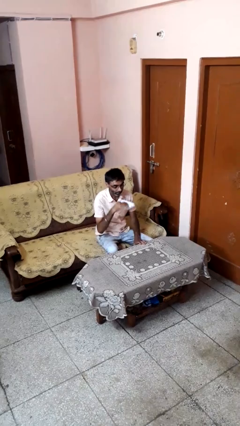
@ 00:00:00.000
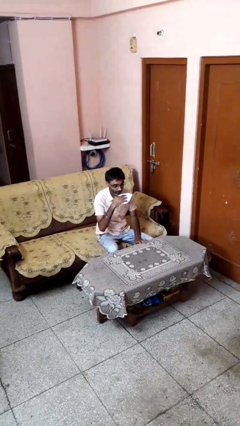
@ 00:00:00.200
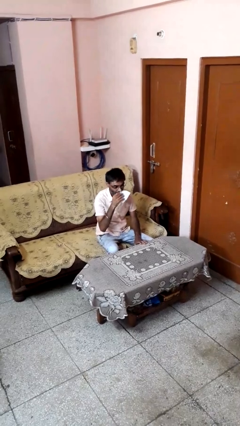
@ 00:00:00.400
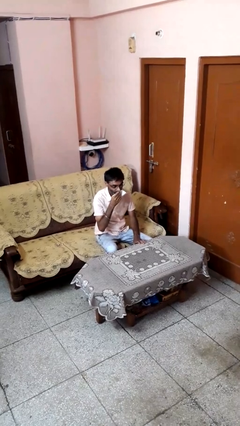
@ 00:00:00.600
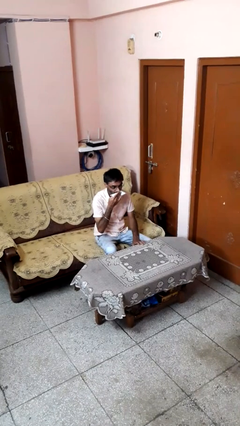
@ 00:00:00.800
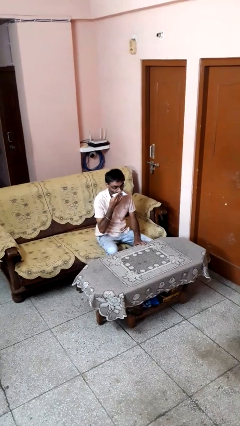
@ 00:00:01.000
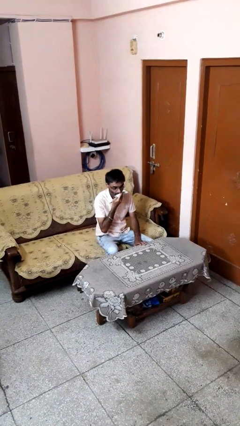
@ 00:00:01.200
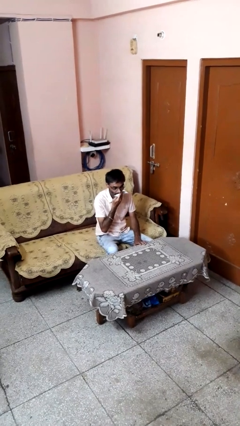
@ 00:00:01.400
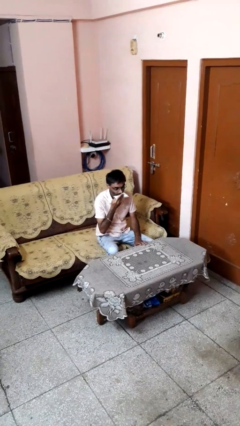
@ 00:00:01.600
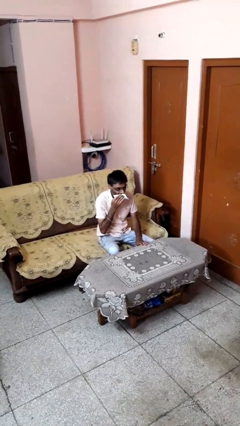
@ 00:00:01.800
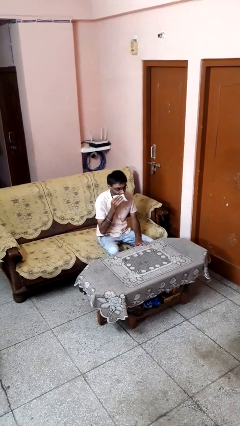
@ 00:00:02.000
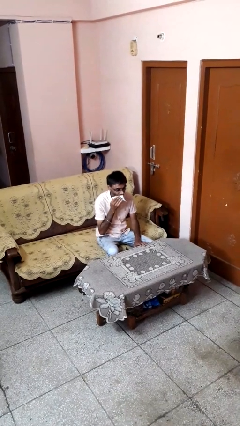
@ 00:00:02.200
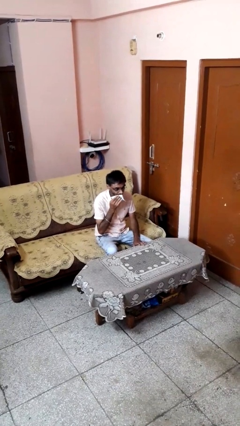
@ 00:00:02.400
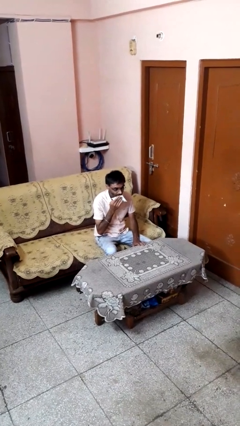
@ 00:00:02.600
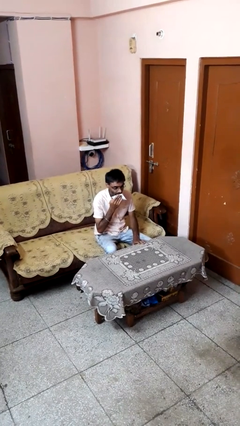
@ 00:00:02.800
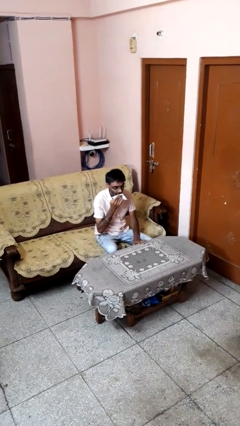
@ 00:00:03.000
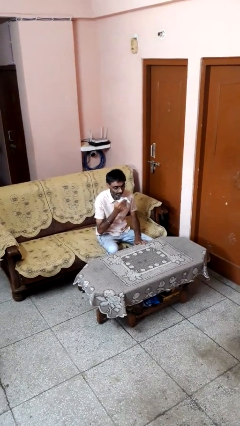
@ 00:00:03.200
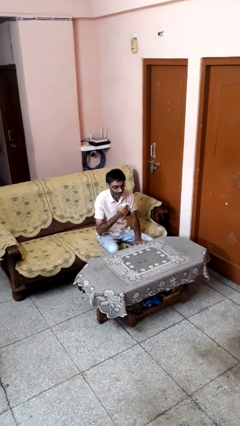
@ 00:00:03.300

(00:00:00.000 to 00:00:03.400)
person wipes mouth with napkin

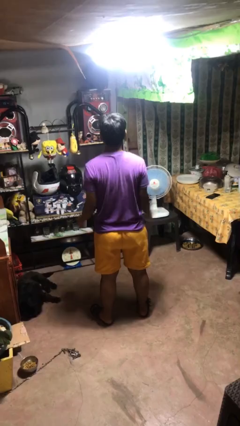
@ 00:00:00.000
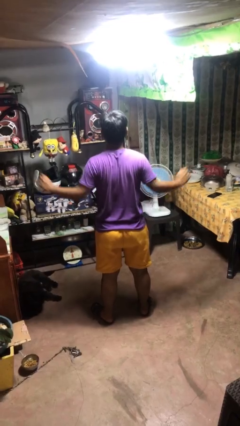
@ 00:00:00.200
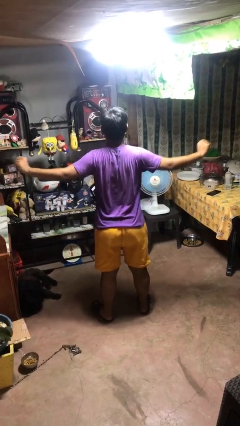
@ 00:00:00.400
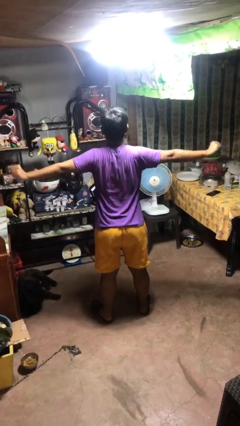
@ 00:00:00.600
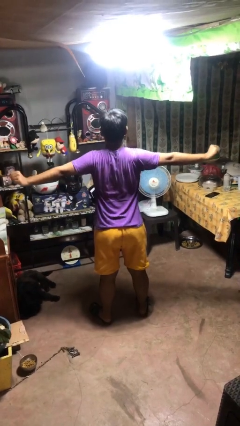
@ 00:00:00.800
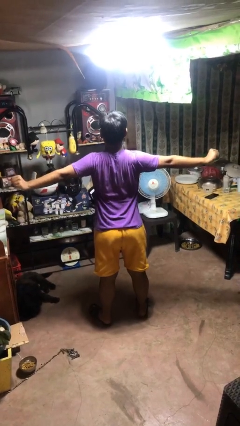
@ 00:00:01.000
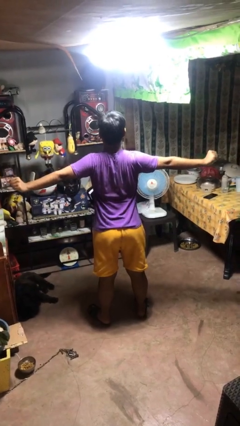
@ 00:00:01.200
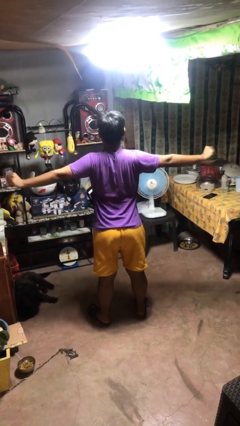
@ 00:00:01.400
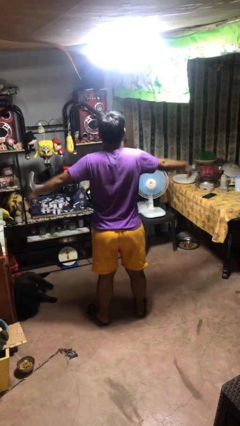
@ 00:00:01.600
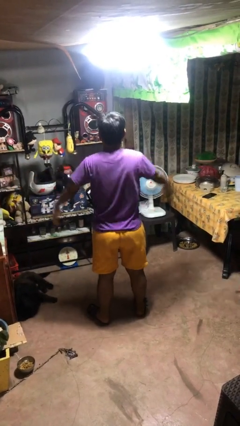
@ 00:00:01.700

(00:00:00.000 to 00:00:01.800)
person stretches arms to side

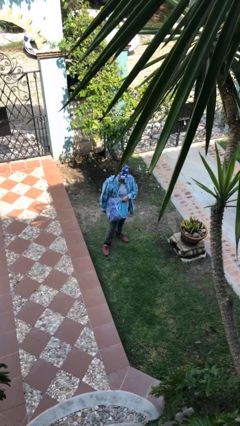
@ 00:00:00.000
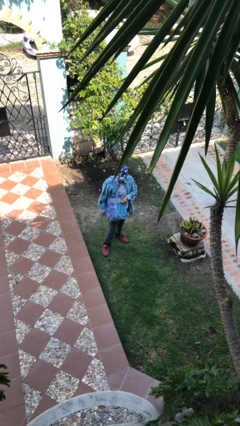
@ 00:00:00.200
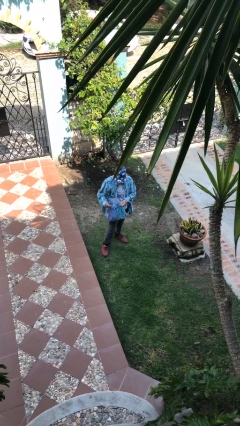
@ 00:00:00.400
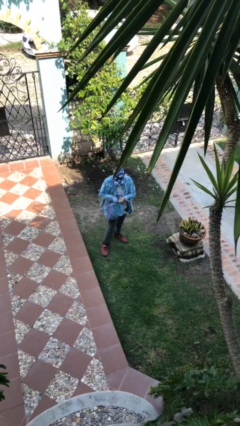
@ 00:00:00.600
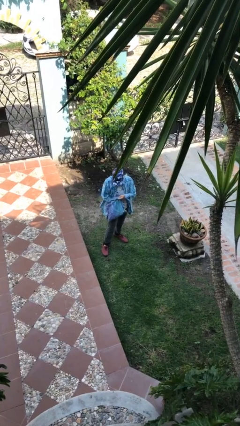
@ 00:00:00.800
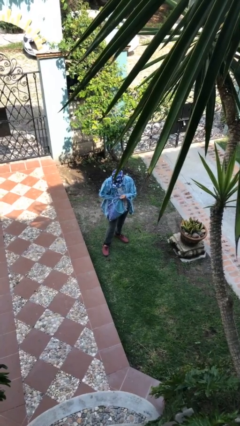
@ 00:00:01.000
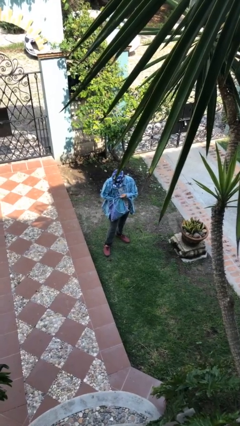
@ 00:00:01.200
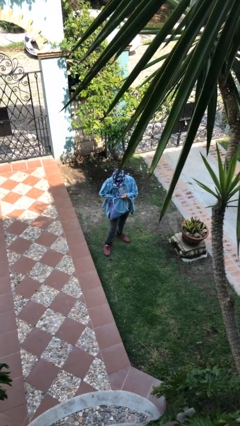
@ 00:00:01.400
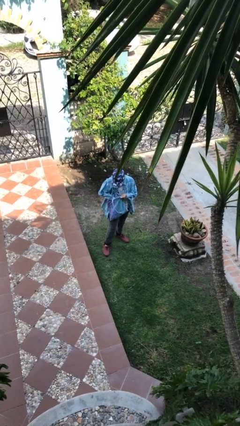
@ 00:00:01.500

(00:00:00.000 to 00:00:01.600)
person searches in purse

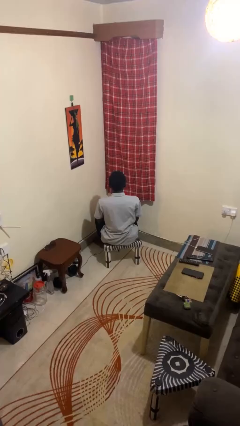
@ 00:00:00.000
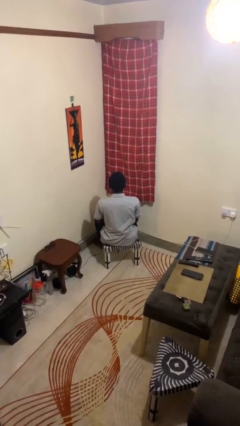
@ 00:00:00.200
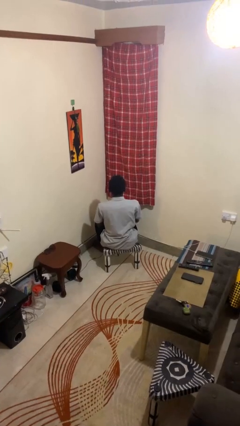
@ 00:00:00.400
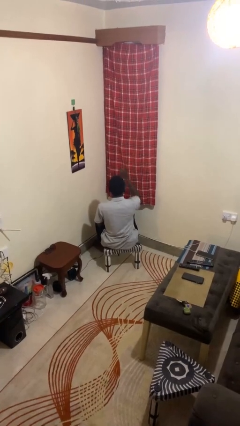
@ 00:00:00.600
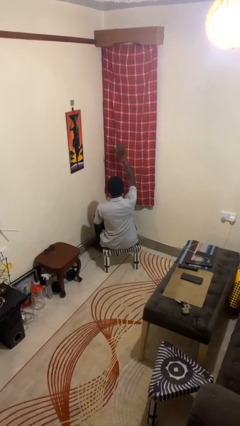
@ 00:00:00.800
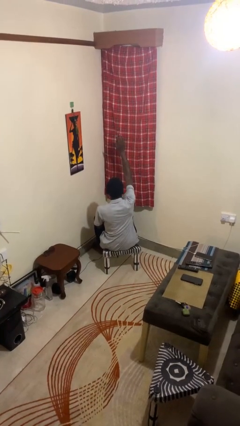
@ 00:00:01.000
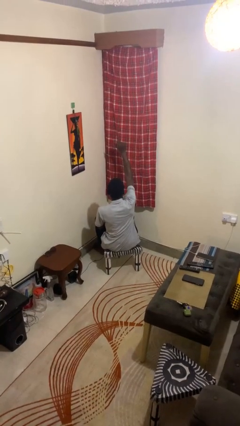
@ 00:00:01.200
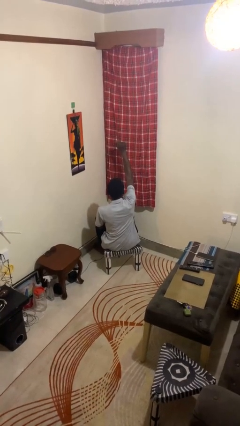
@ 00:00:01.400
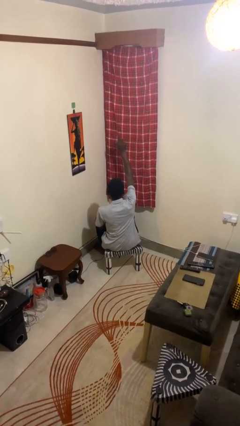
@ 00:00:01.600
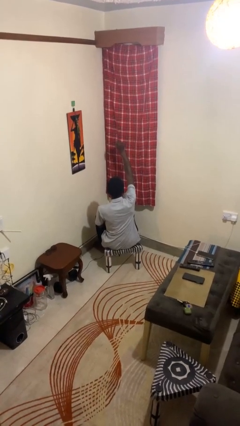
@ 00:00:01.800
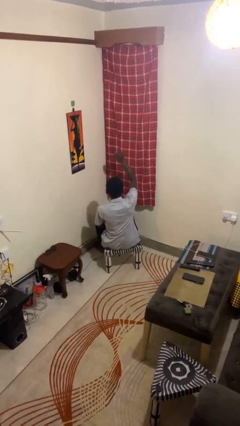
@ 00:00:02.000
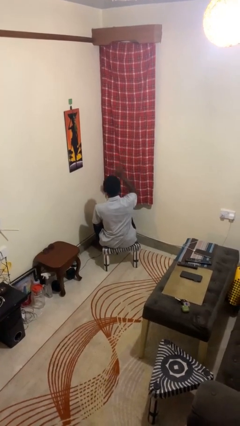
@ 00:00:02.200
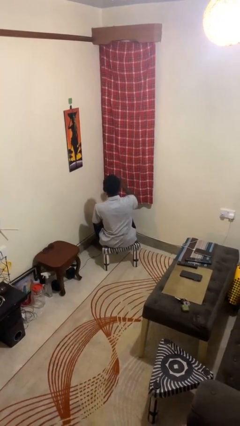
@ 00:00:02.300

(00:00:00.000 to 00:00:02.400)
person gestures come here

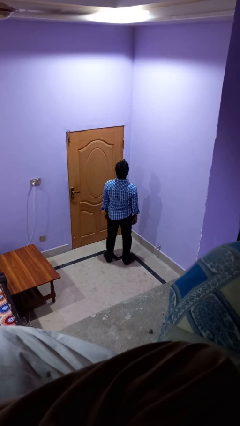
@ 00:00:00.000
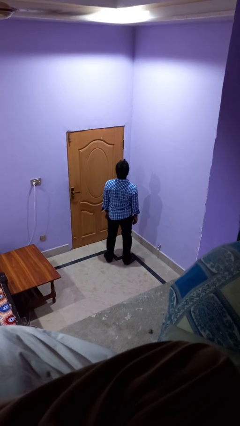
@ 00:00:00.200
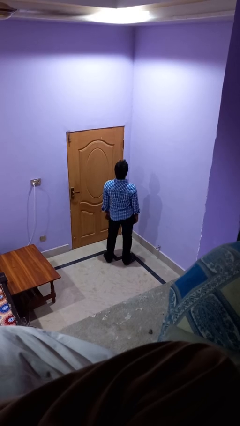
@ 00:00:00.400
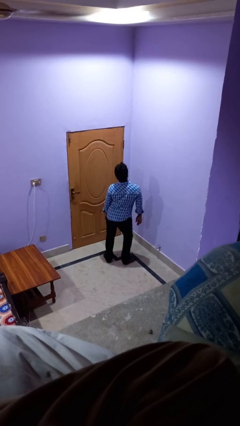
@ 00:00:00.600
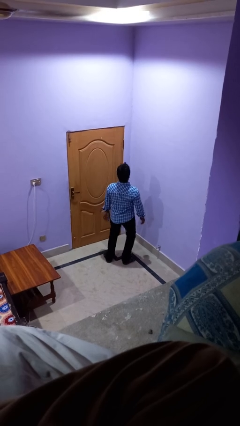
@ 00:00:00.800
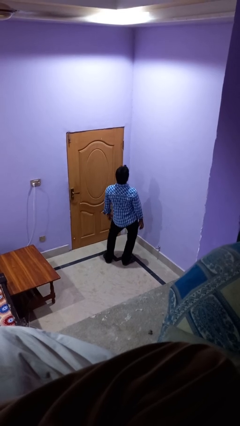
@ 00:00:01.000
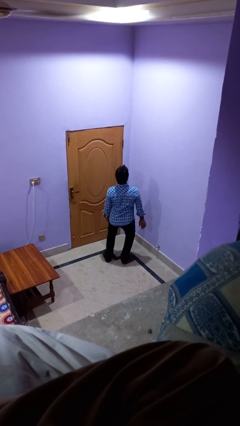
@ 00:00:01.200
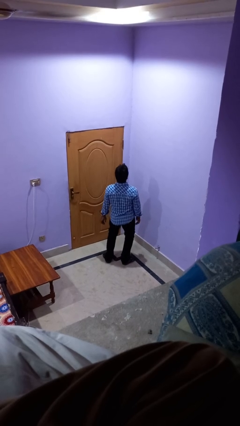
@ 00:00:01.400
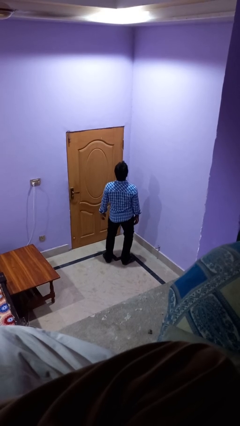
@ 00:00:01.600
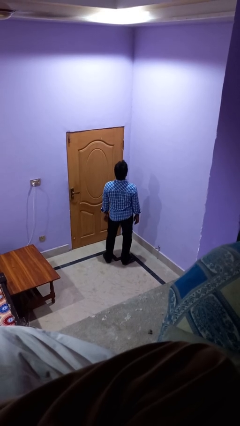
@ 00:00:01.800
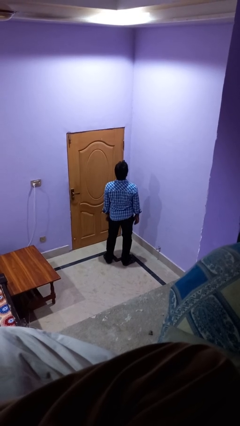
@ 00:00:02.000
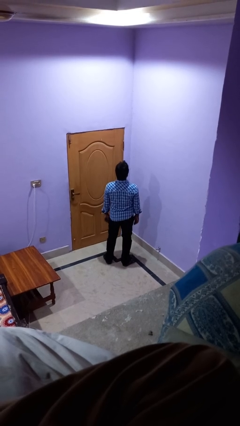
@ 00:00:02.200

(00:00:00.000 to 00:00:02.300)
person wiggles hips

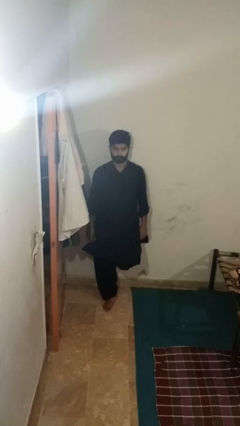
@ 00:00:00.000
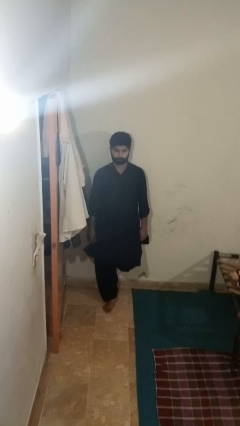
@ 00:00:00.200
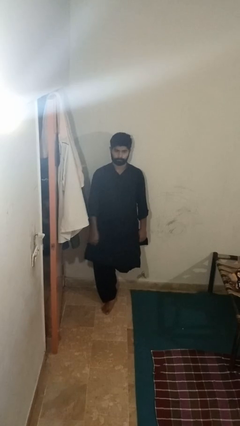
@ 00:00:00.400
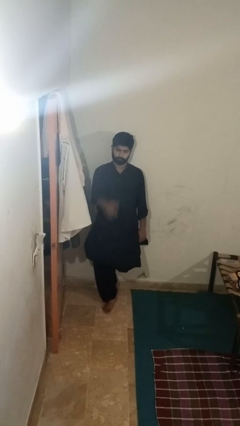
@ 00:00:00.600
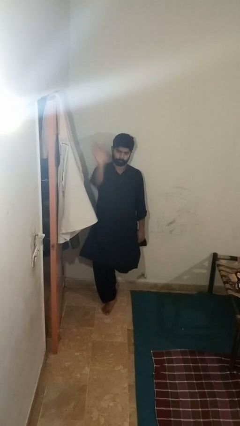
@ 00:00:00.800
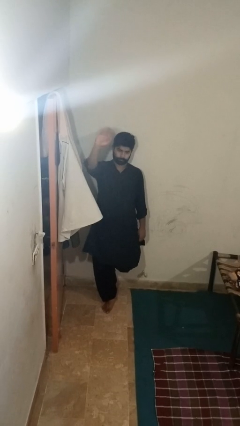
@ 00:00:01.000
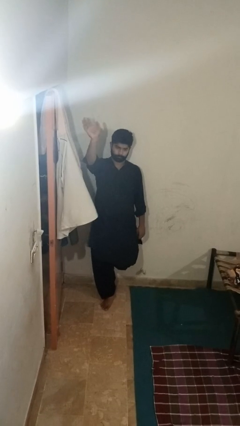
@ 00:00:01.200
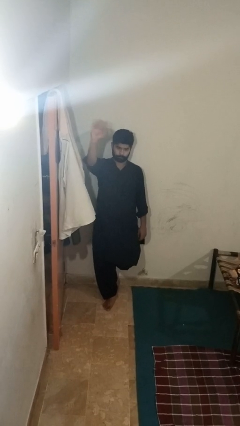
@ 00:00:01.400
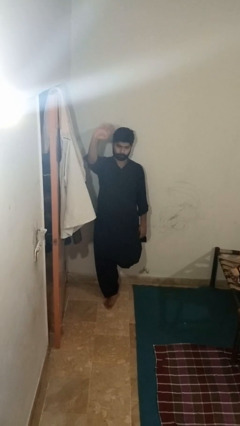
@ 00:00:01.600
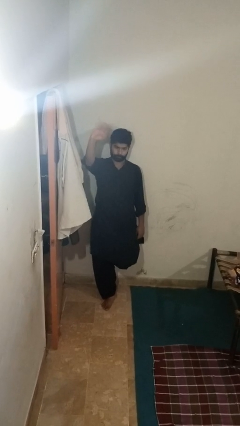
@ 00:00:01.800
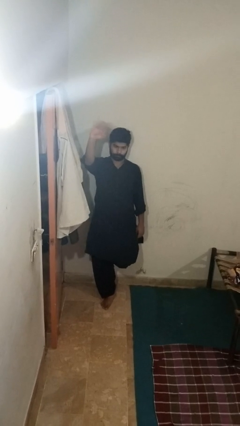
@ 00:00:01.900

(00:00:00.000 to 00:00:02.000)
person waves at person

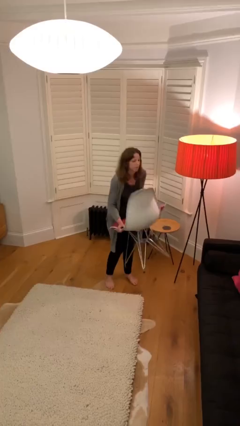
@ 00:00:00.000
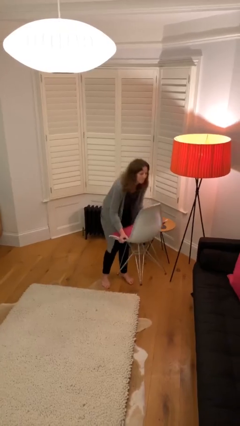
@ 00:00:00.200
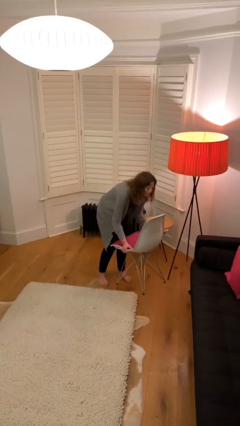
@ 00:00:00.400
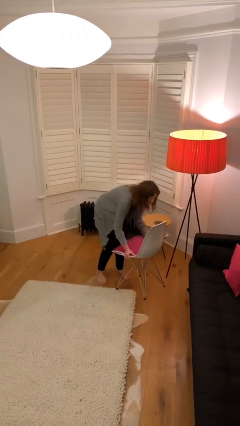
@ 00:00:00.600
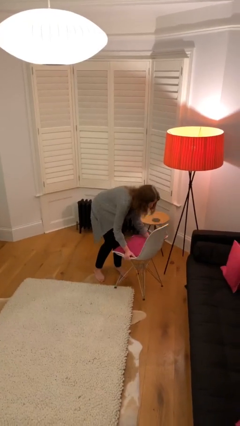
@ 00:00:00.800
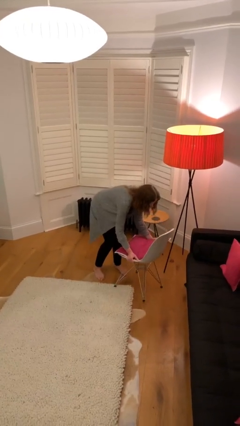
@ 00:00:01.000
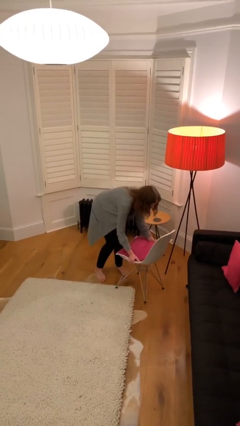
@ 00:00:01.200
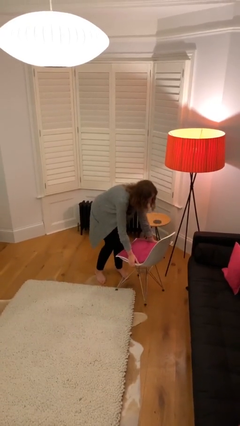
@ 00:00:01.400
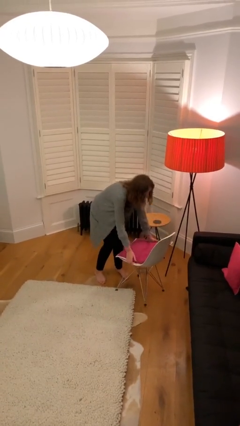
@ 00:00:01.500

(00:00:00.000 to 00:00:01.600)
person puts down object on floor

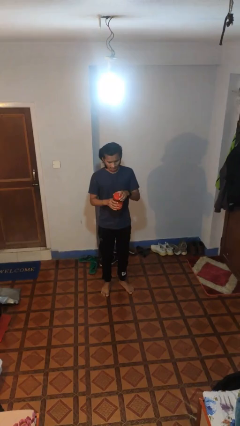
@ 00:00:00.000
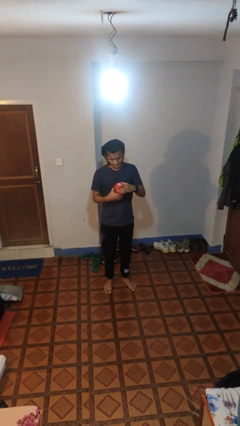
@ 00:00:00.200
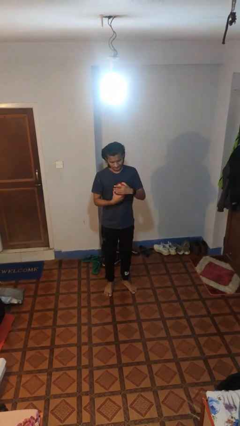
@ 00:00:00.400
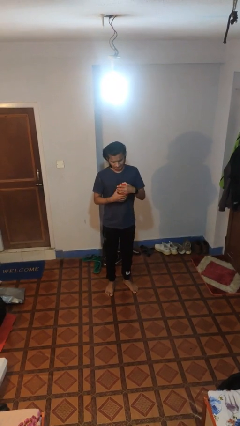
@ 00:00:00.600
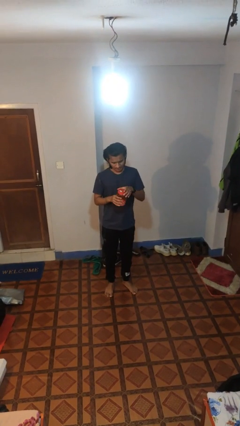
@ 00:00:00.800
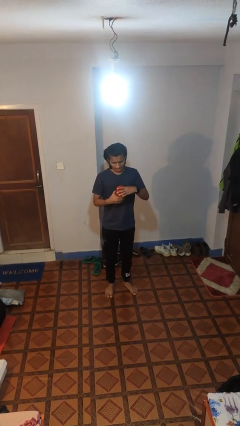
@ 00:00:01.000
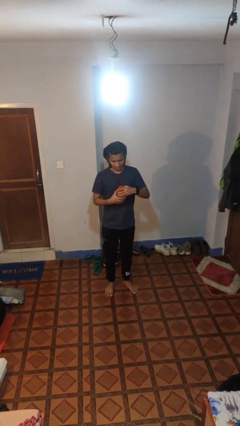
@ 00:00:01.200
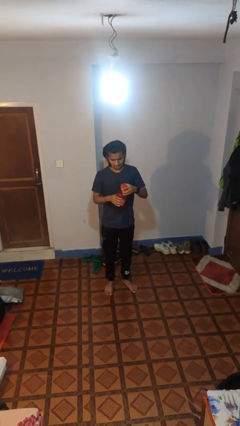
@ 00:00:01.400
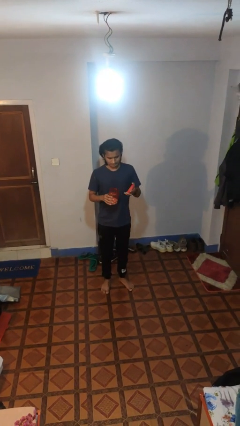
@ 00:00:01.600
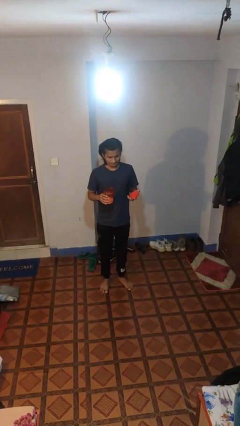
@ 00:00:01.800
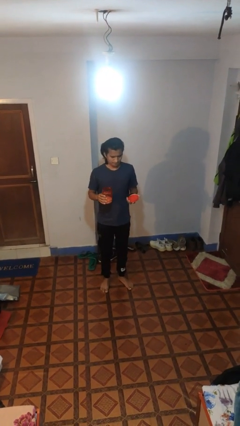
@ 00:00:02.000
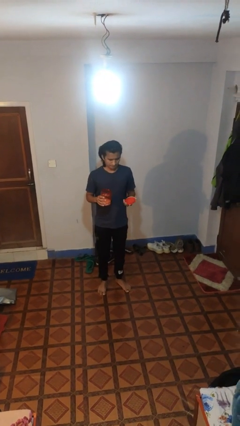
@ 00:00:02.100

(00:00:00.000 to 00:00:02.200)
person opens jar
